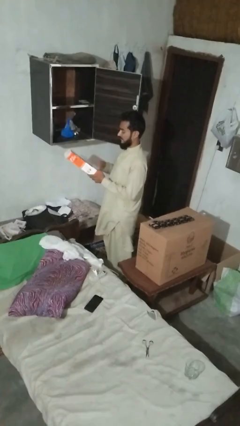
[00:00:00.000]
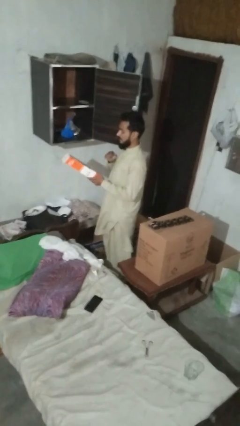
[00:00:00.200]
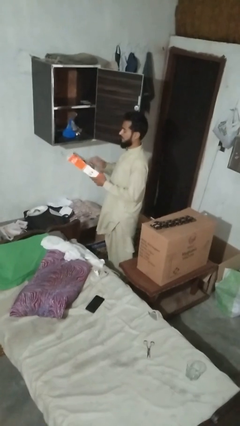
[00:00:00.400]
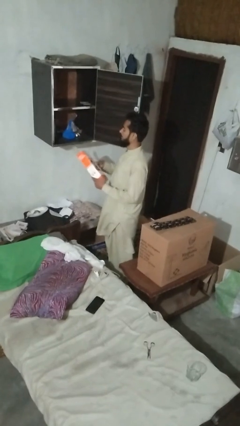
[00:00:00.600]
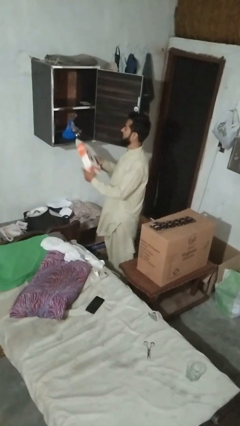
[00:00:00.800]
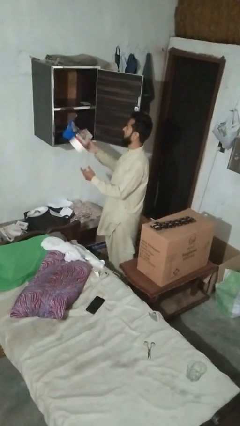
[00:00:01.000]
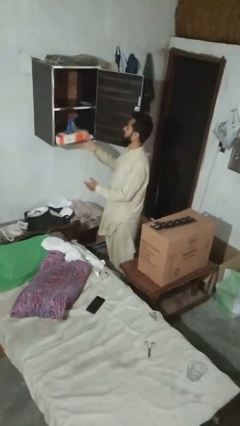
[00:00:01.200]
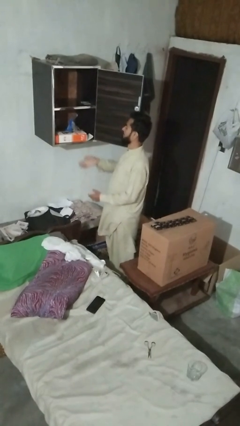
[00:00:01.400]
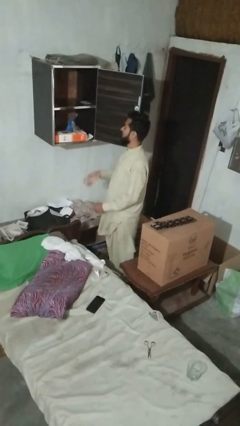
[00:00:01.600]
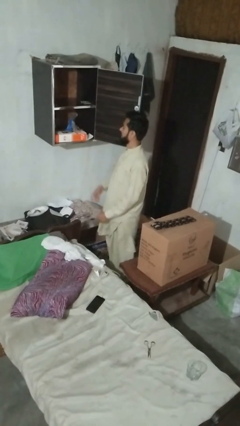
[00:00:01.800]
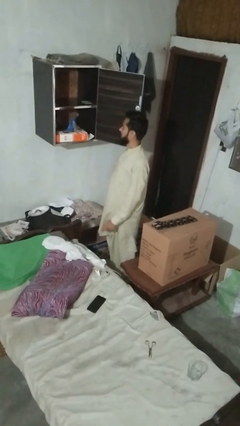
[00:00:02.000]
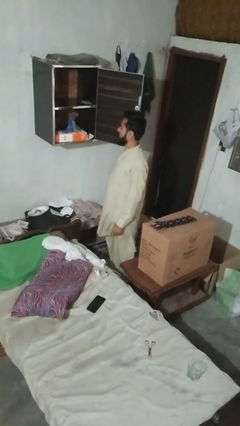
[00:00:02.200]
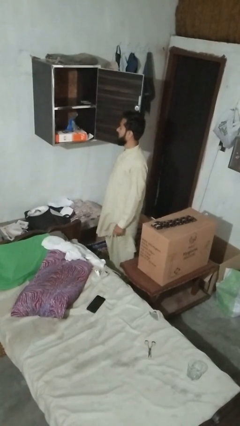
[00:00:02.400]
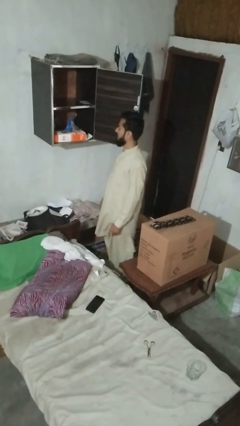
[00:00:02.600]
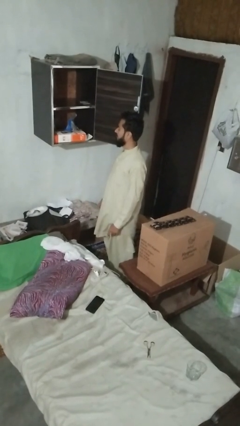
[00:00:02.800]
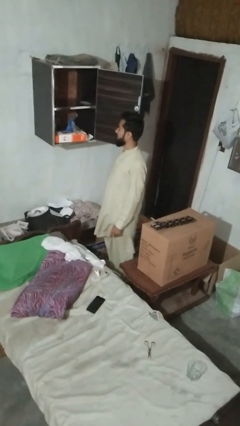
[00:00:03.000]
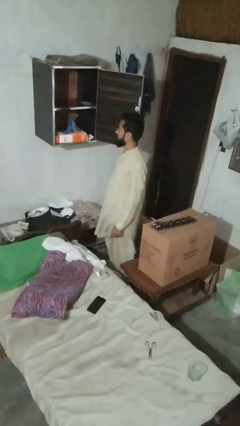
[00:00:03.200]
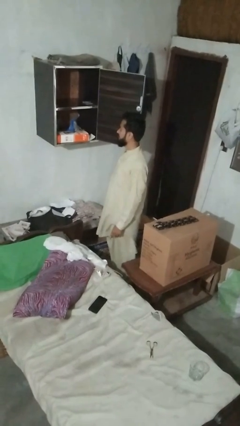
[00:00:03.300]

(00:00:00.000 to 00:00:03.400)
person puts down object into cabinet

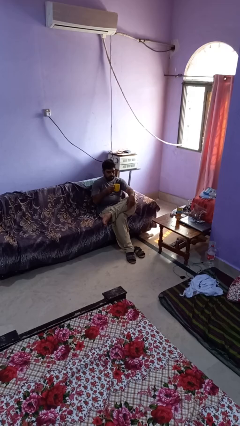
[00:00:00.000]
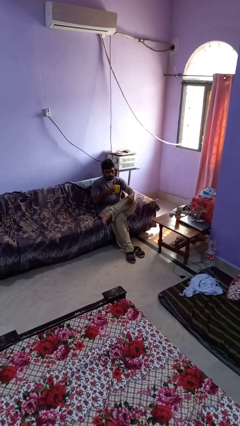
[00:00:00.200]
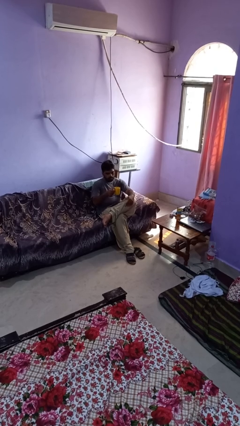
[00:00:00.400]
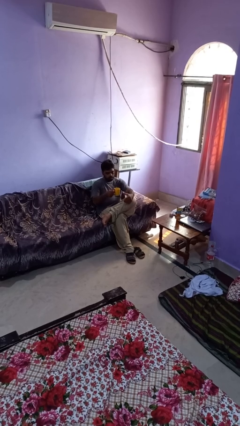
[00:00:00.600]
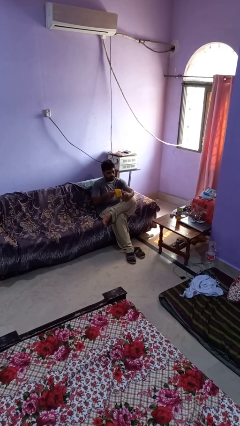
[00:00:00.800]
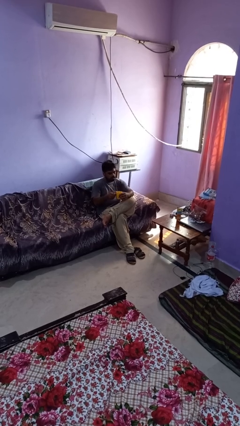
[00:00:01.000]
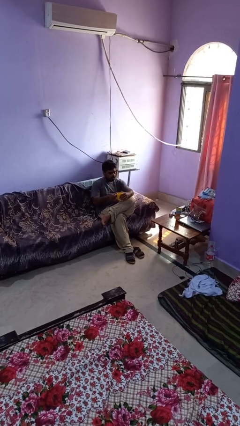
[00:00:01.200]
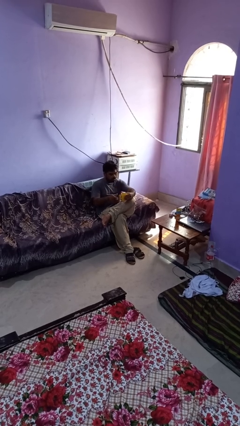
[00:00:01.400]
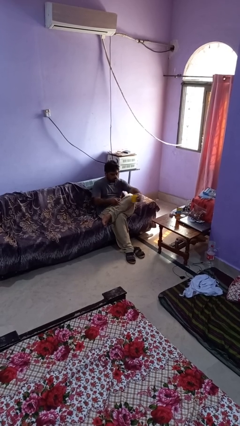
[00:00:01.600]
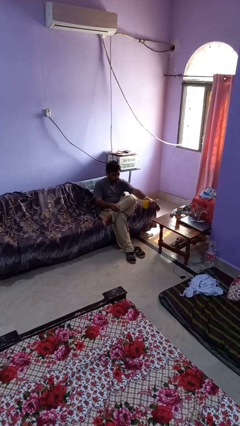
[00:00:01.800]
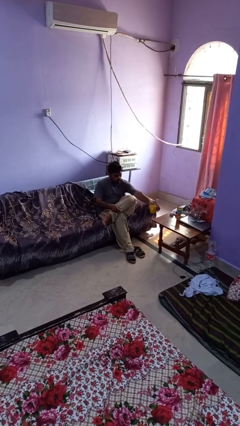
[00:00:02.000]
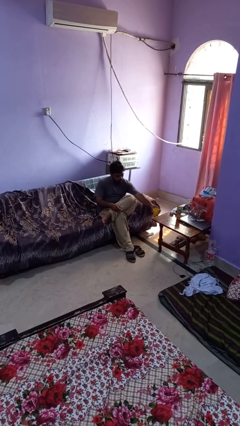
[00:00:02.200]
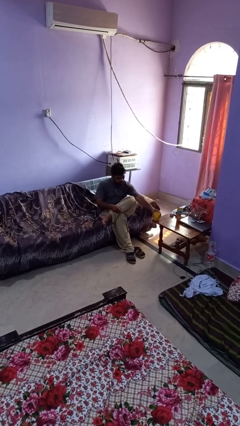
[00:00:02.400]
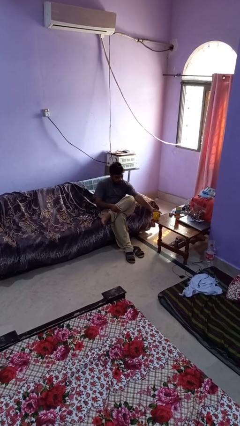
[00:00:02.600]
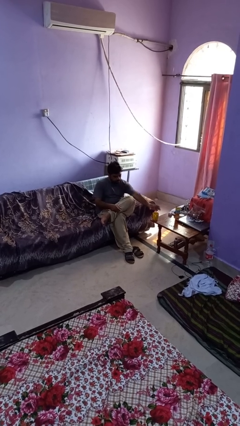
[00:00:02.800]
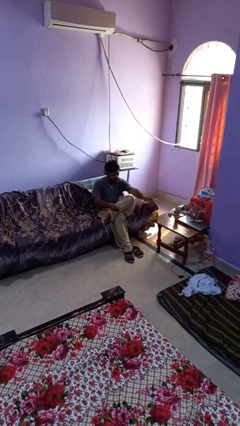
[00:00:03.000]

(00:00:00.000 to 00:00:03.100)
person puts down object on table

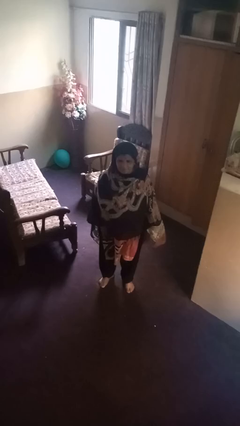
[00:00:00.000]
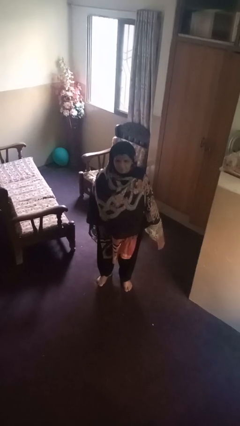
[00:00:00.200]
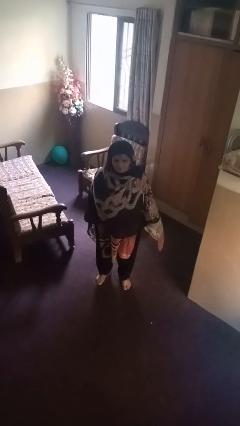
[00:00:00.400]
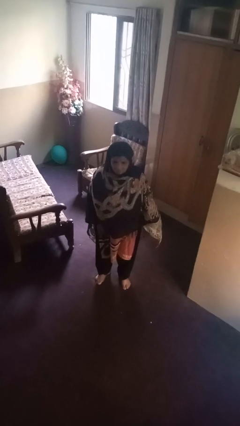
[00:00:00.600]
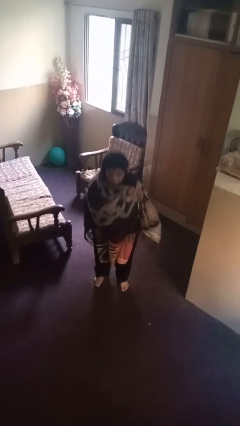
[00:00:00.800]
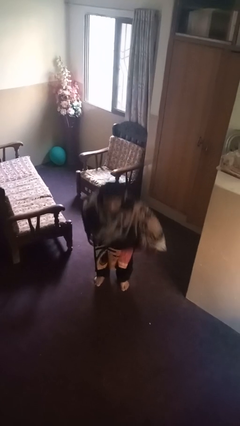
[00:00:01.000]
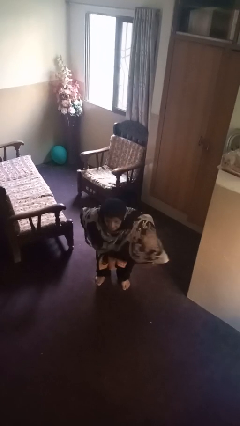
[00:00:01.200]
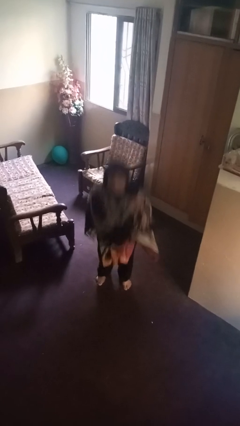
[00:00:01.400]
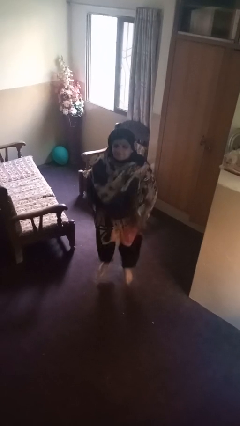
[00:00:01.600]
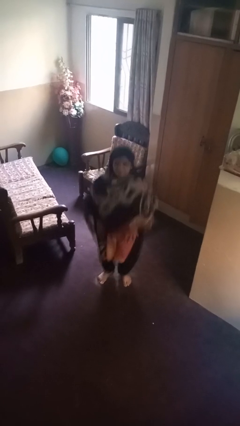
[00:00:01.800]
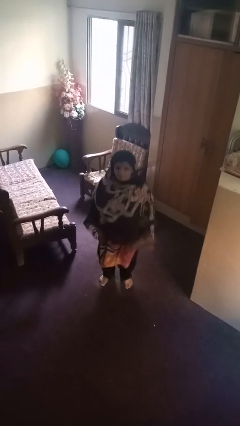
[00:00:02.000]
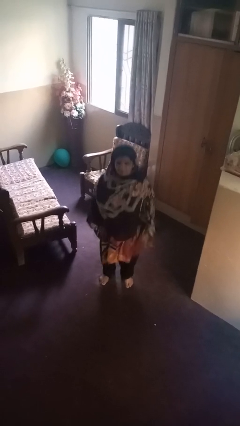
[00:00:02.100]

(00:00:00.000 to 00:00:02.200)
person jumps

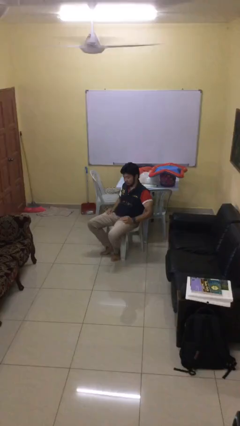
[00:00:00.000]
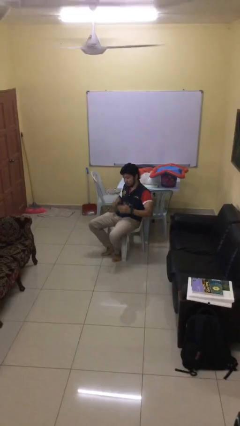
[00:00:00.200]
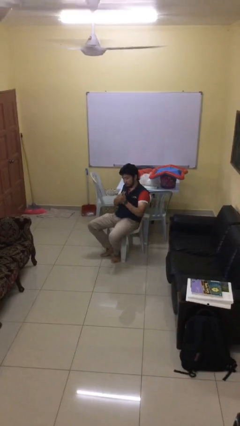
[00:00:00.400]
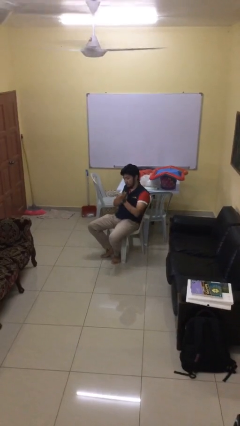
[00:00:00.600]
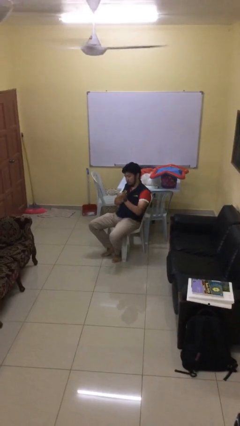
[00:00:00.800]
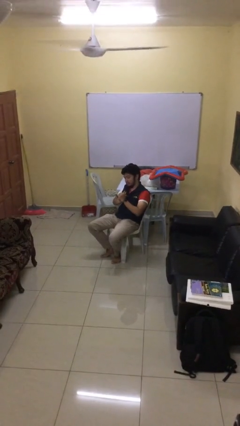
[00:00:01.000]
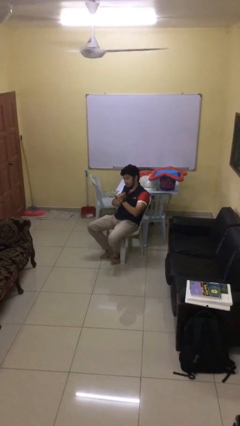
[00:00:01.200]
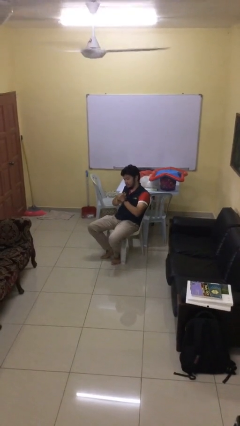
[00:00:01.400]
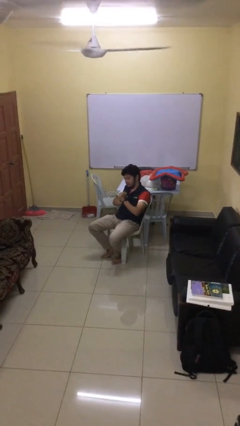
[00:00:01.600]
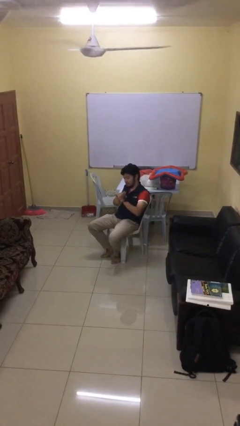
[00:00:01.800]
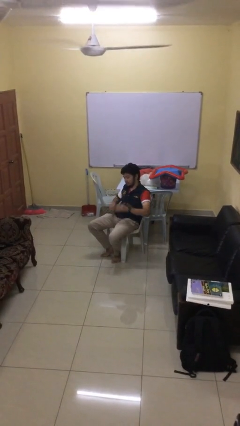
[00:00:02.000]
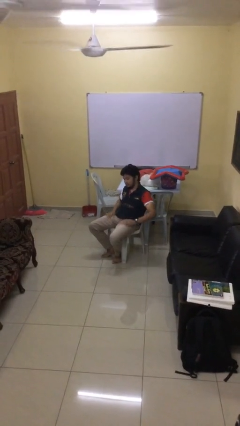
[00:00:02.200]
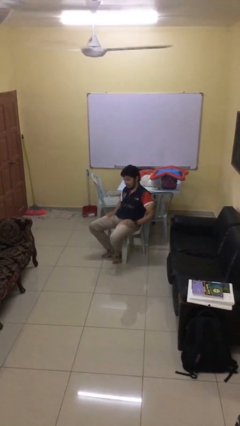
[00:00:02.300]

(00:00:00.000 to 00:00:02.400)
person cracks knuckles

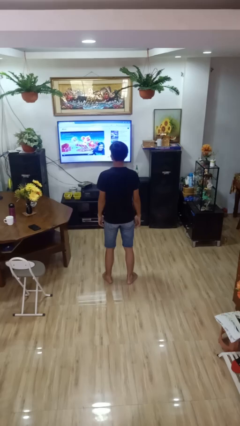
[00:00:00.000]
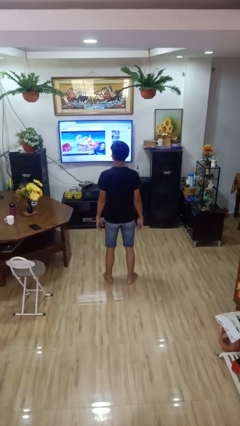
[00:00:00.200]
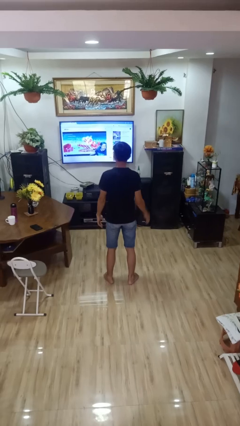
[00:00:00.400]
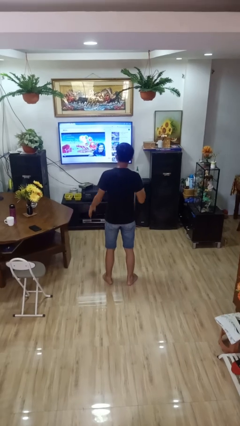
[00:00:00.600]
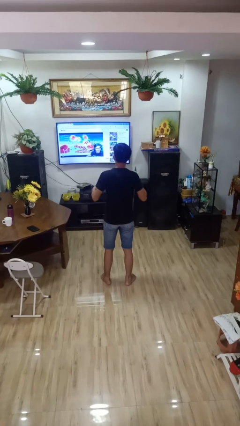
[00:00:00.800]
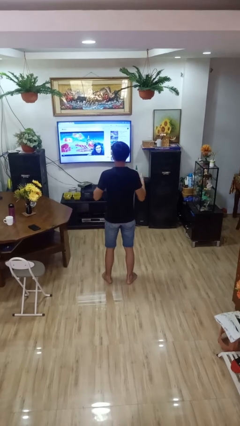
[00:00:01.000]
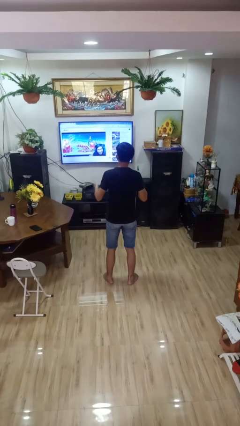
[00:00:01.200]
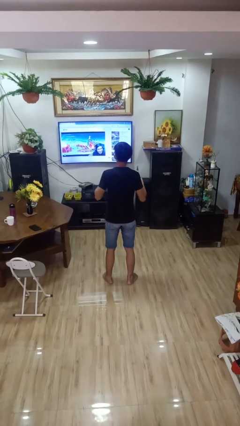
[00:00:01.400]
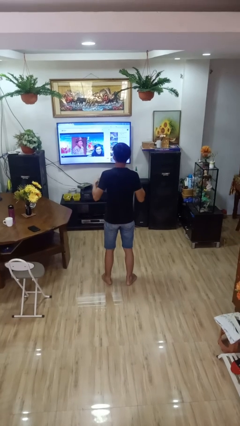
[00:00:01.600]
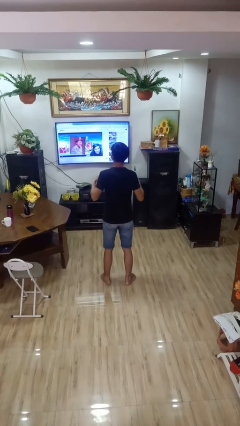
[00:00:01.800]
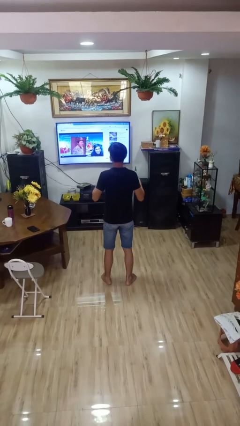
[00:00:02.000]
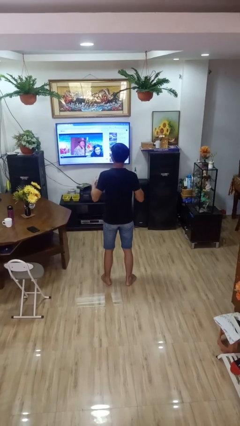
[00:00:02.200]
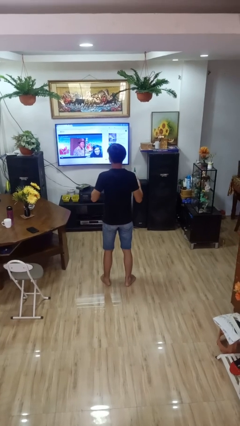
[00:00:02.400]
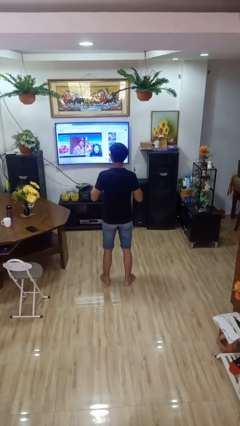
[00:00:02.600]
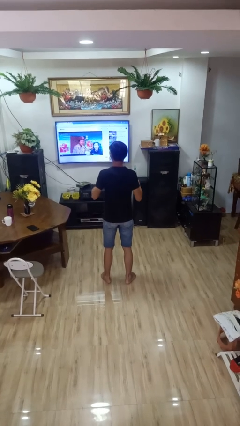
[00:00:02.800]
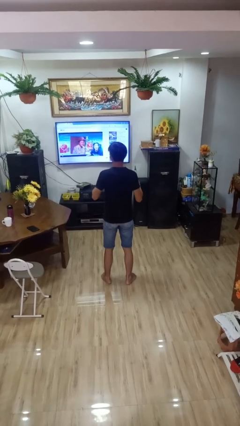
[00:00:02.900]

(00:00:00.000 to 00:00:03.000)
person drums on chest

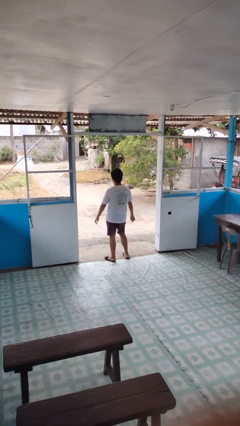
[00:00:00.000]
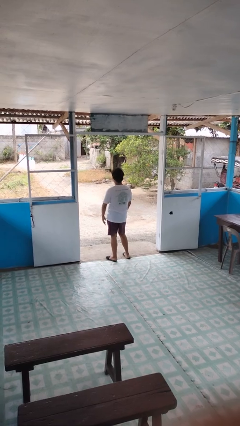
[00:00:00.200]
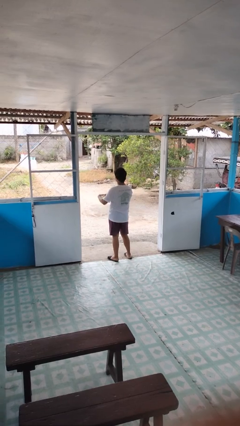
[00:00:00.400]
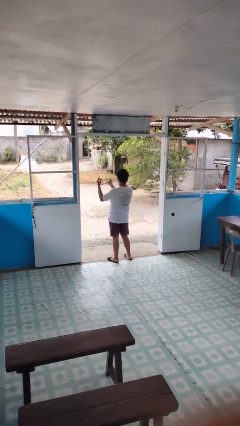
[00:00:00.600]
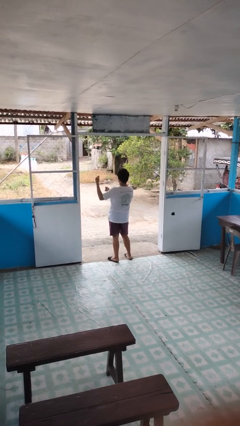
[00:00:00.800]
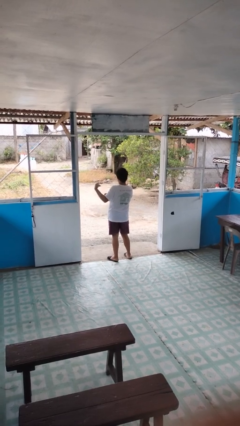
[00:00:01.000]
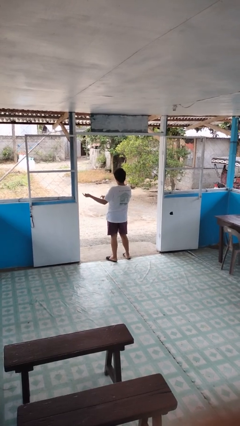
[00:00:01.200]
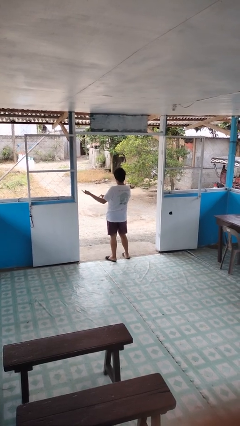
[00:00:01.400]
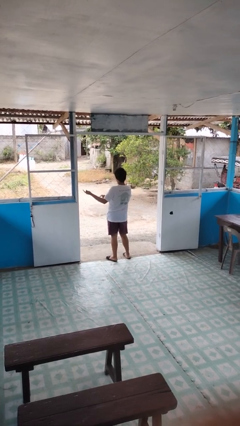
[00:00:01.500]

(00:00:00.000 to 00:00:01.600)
person snaps fingers

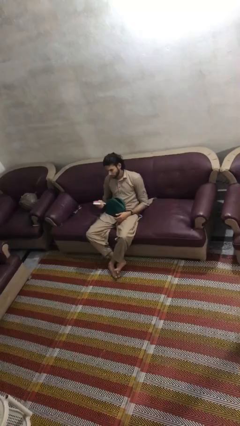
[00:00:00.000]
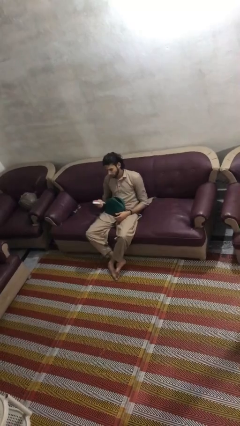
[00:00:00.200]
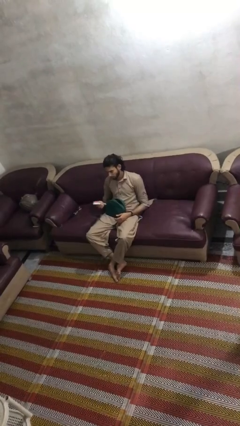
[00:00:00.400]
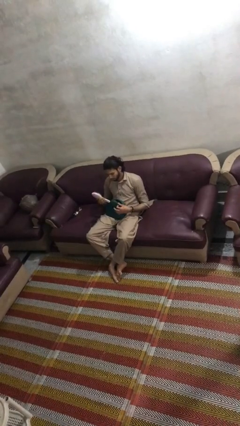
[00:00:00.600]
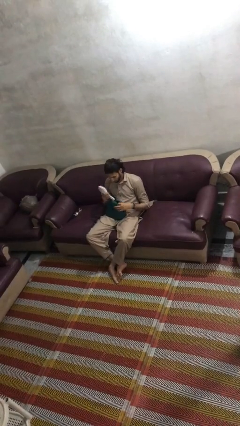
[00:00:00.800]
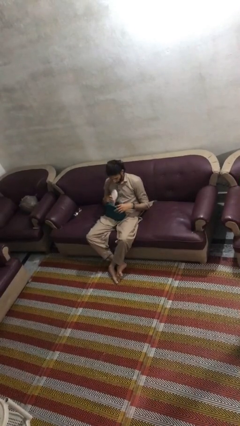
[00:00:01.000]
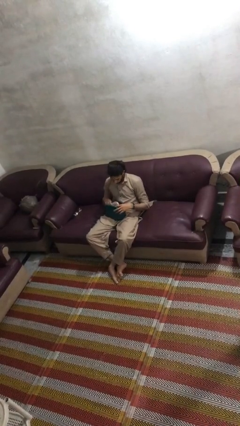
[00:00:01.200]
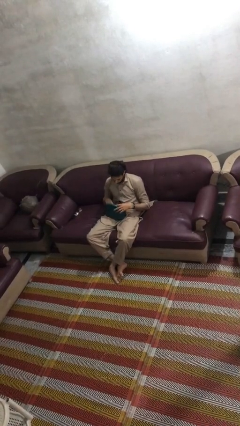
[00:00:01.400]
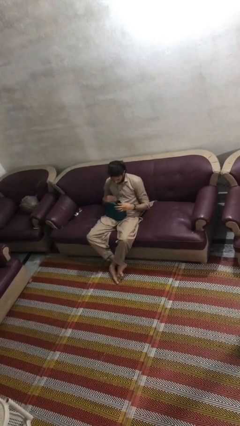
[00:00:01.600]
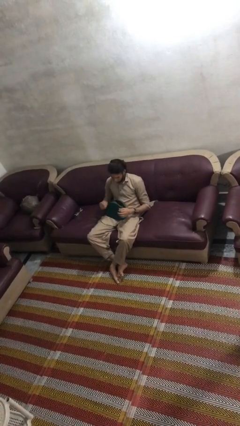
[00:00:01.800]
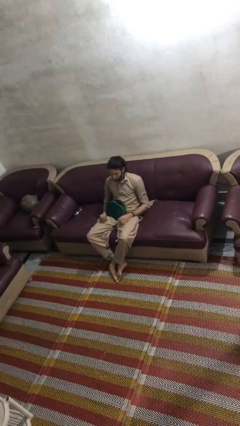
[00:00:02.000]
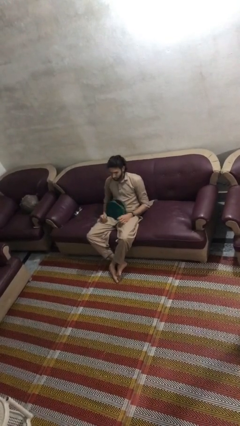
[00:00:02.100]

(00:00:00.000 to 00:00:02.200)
person puts object into purse
